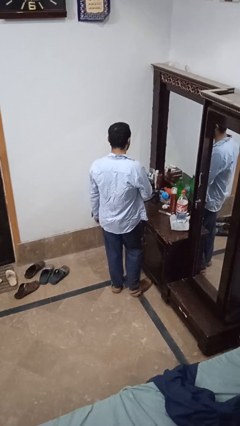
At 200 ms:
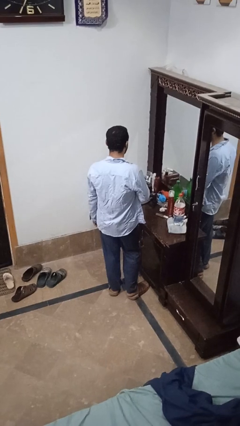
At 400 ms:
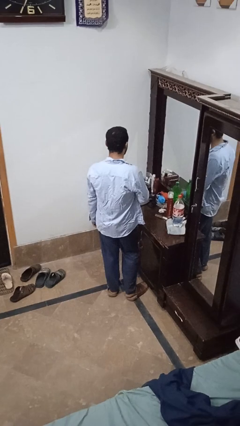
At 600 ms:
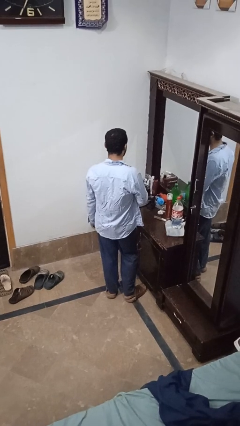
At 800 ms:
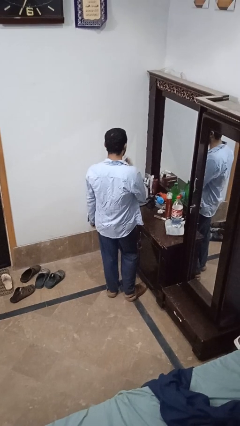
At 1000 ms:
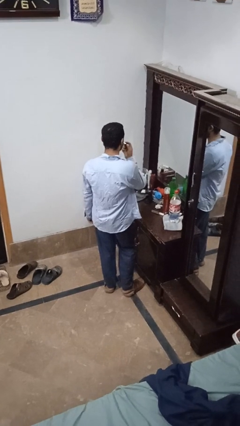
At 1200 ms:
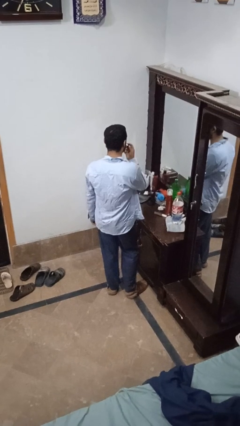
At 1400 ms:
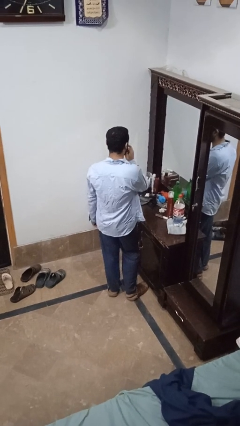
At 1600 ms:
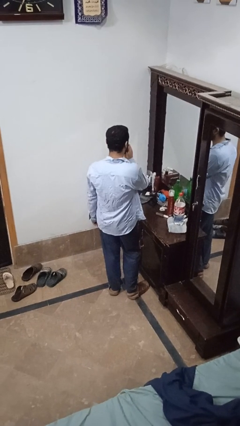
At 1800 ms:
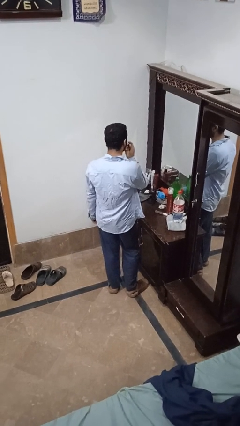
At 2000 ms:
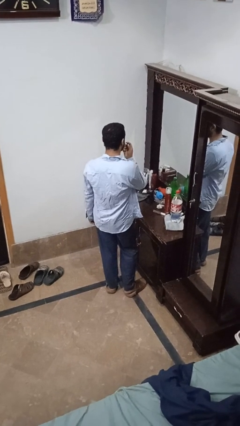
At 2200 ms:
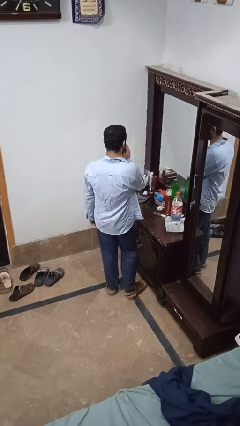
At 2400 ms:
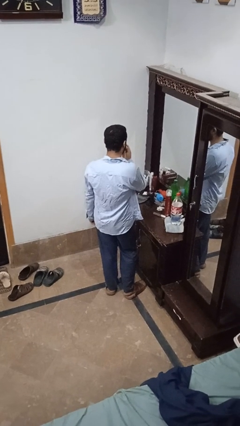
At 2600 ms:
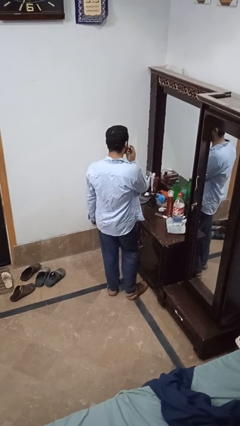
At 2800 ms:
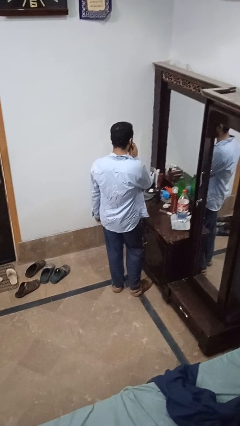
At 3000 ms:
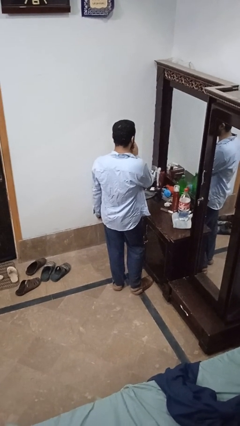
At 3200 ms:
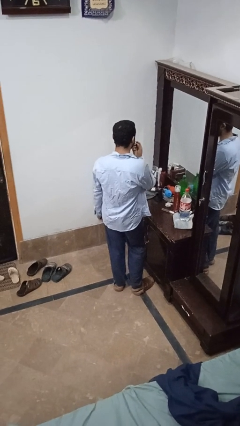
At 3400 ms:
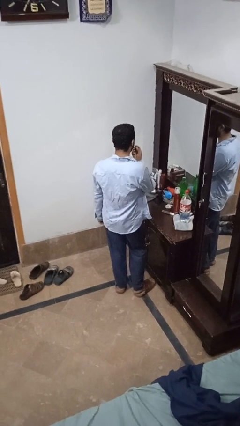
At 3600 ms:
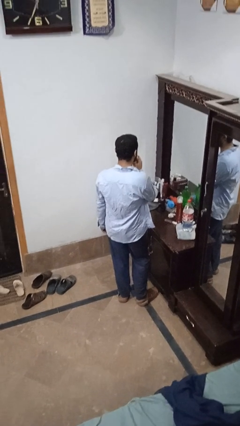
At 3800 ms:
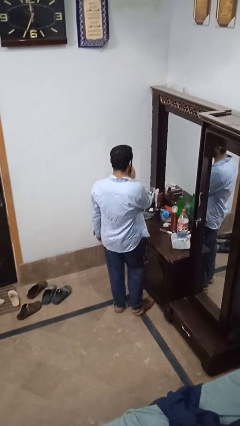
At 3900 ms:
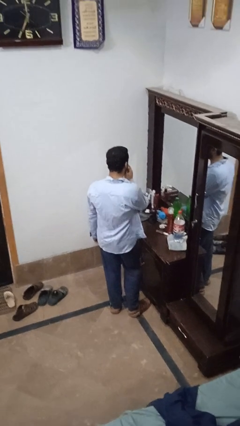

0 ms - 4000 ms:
person applies lip makeup

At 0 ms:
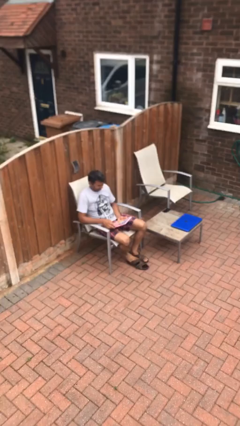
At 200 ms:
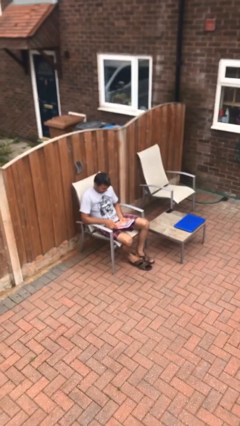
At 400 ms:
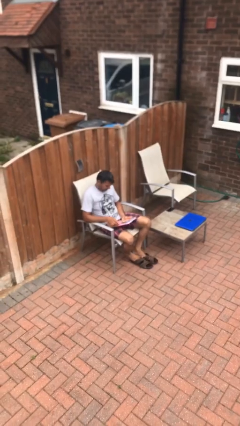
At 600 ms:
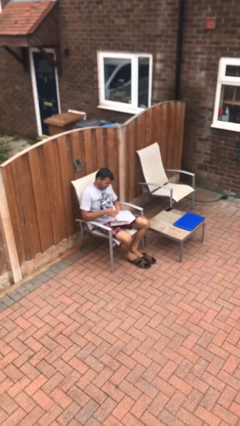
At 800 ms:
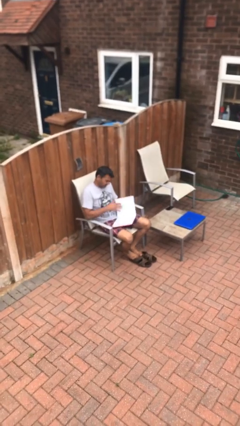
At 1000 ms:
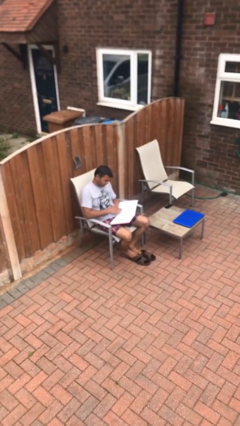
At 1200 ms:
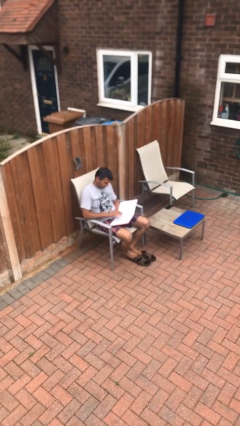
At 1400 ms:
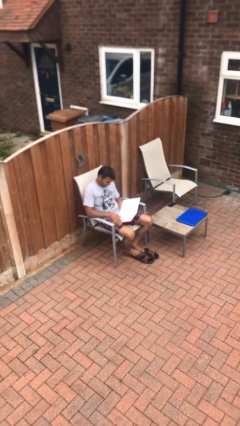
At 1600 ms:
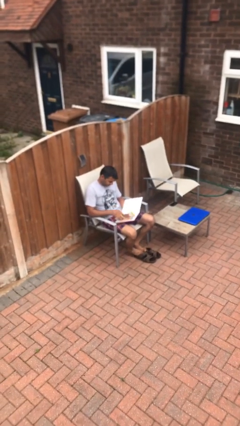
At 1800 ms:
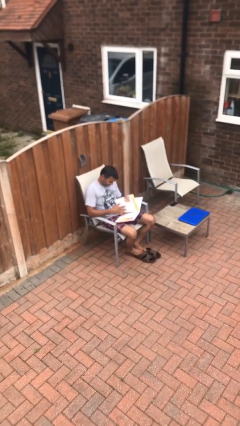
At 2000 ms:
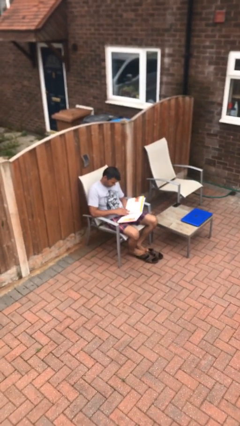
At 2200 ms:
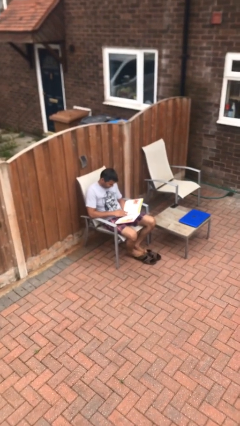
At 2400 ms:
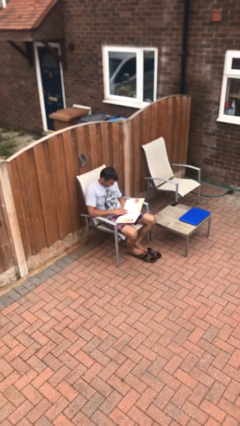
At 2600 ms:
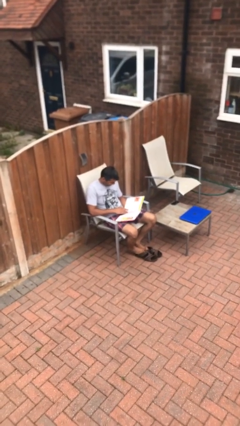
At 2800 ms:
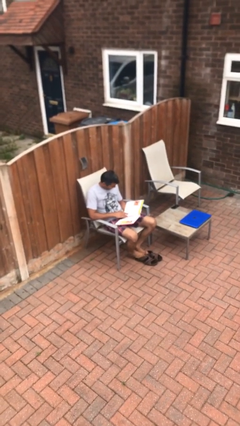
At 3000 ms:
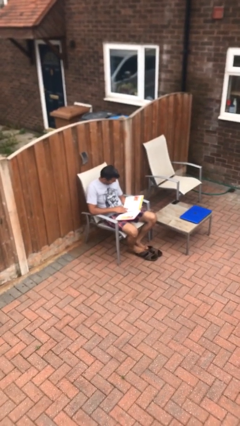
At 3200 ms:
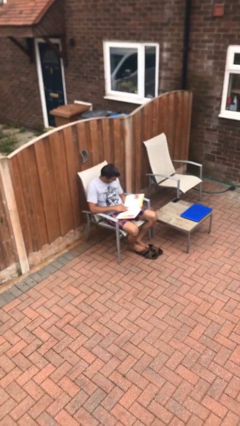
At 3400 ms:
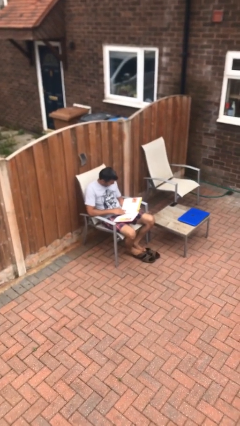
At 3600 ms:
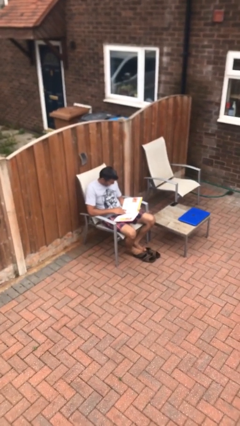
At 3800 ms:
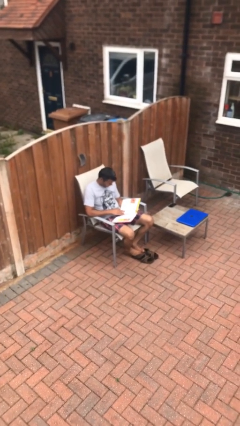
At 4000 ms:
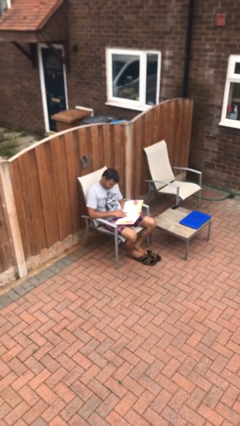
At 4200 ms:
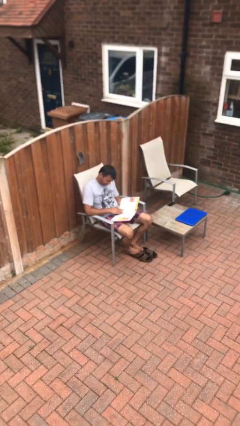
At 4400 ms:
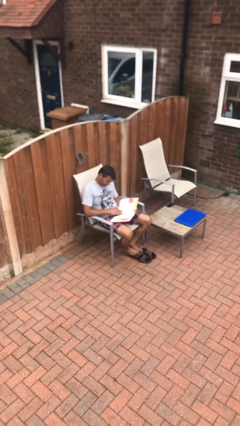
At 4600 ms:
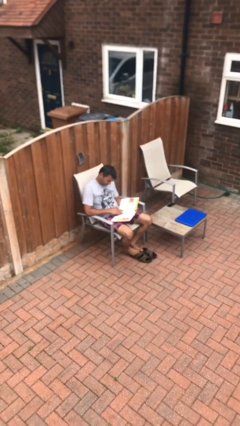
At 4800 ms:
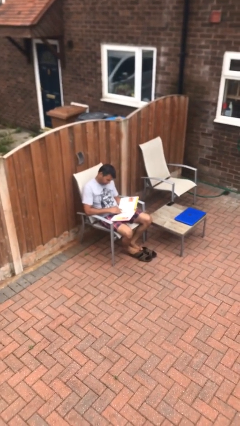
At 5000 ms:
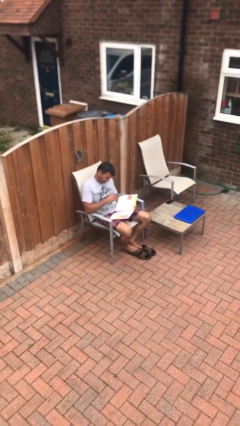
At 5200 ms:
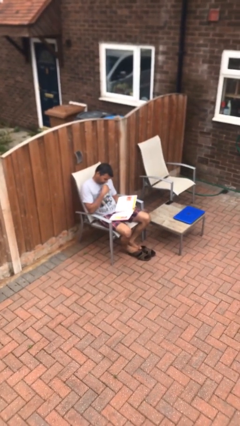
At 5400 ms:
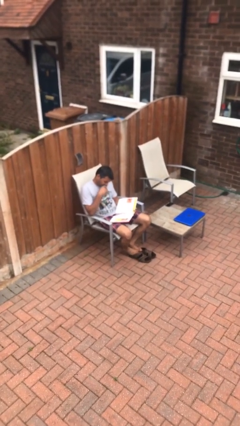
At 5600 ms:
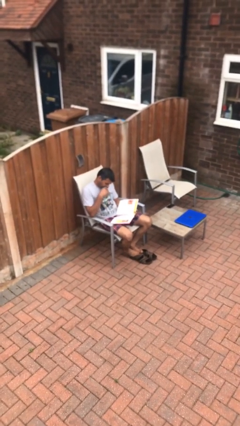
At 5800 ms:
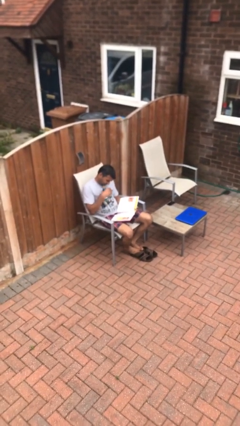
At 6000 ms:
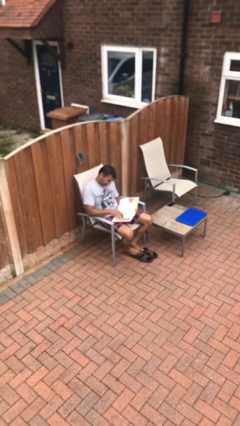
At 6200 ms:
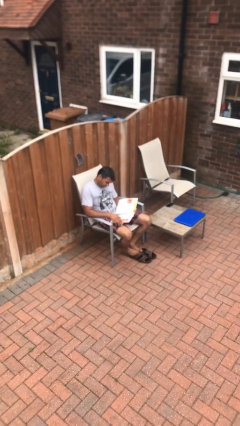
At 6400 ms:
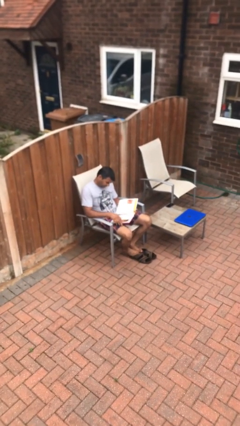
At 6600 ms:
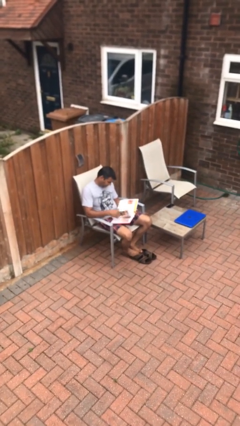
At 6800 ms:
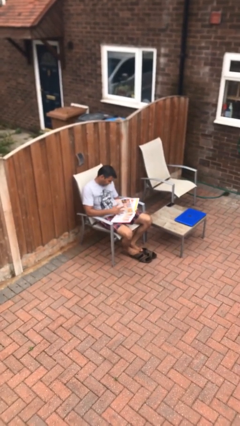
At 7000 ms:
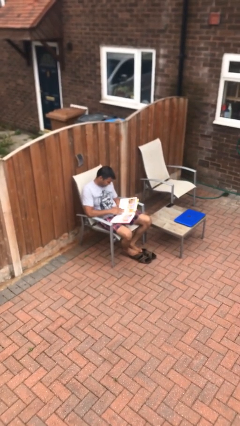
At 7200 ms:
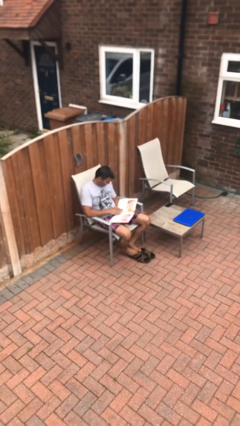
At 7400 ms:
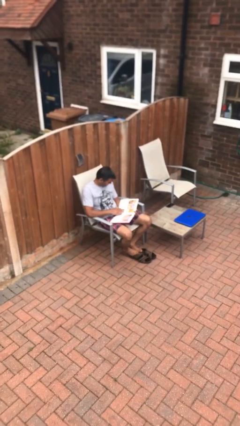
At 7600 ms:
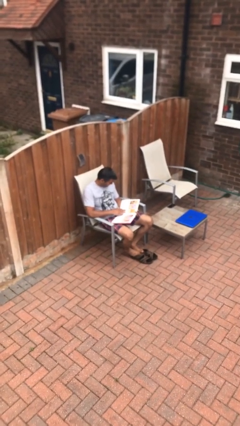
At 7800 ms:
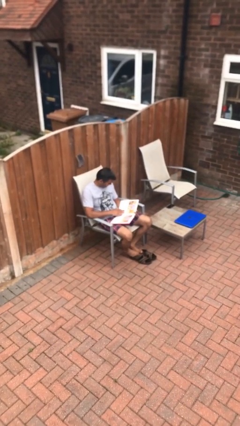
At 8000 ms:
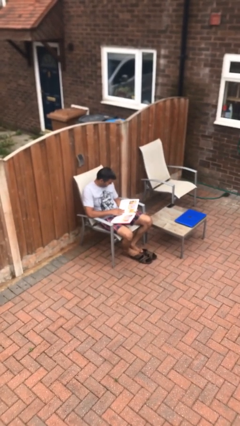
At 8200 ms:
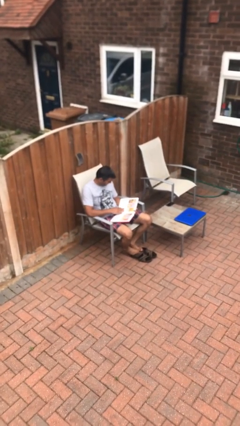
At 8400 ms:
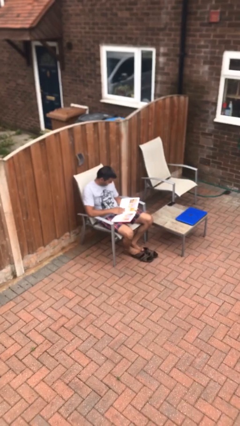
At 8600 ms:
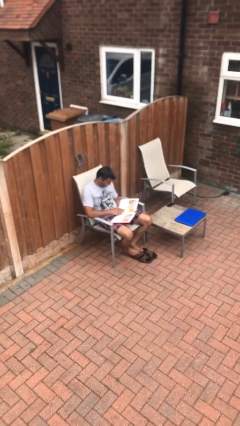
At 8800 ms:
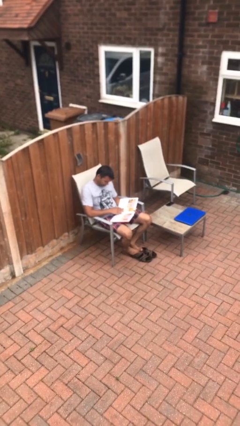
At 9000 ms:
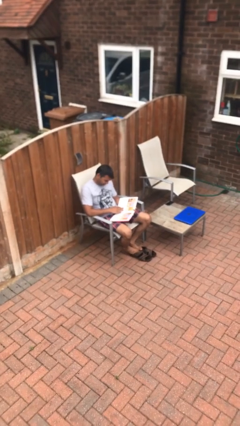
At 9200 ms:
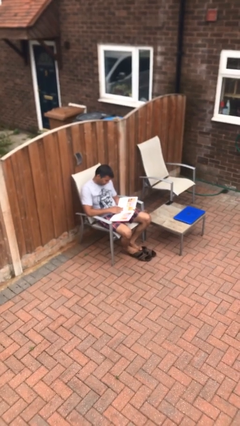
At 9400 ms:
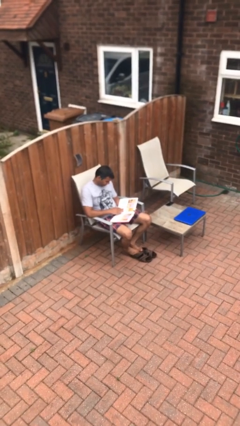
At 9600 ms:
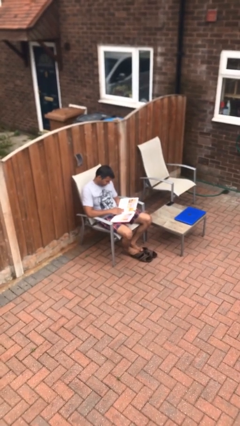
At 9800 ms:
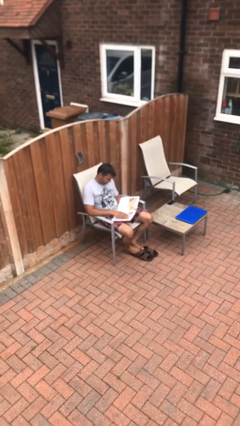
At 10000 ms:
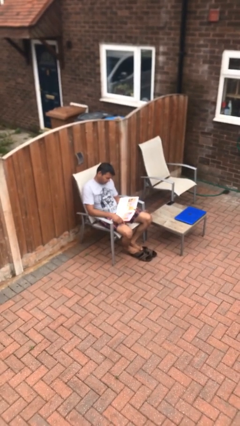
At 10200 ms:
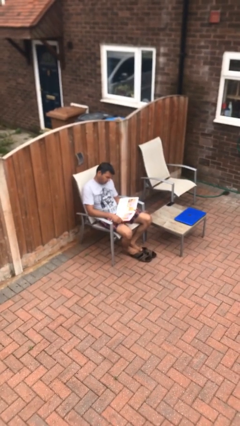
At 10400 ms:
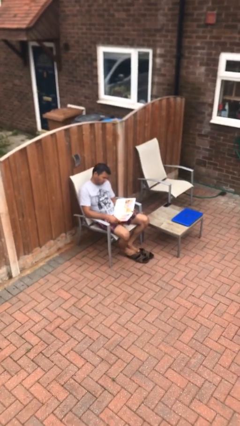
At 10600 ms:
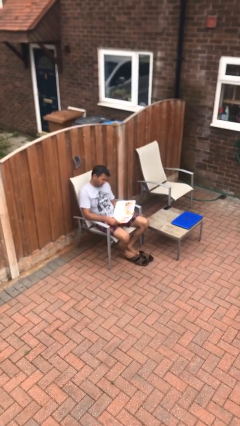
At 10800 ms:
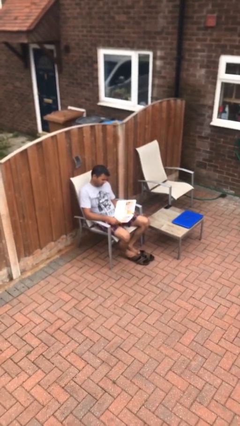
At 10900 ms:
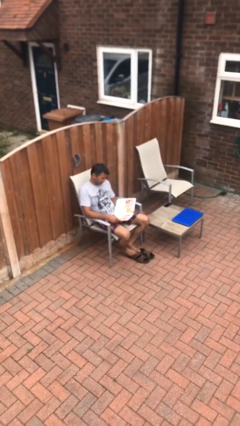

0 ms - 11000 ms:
person reads document

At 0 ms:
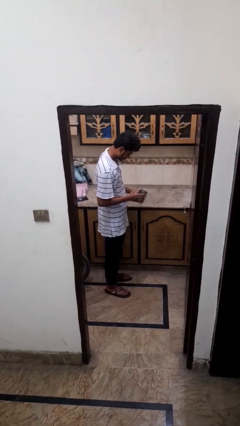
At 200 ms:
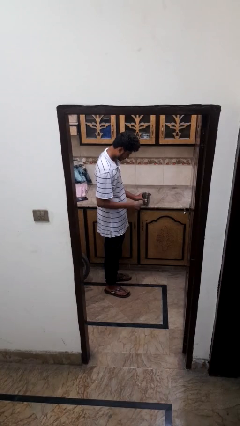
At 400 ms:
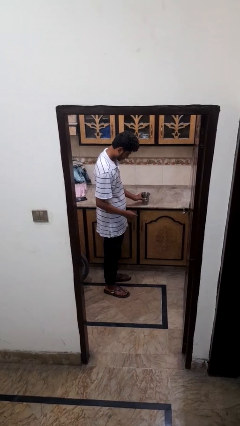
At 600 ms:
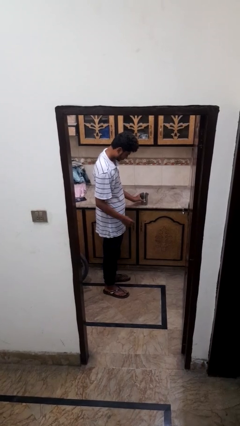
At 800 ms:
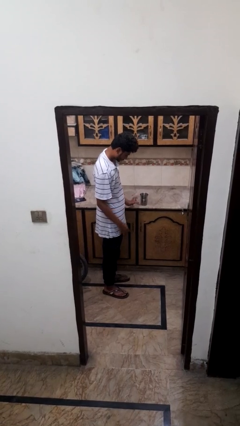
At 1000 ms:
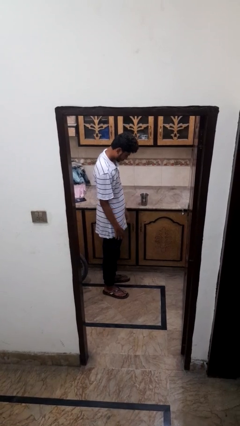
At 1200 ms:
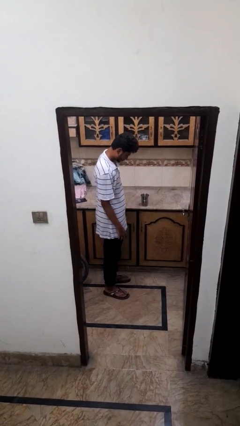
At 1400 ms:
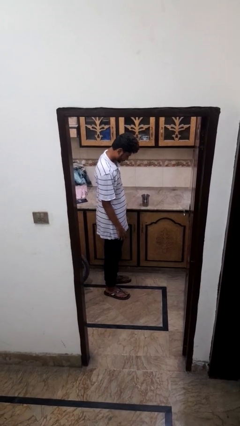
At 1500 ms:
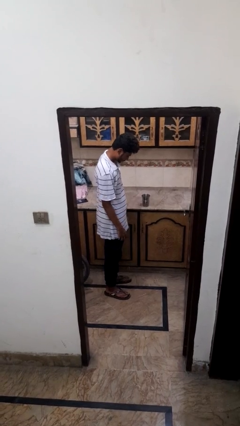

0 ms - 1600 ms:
person puts down object on countertop

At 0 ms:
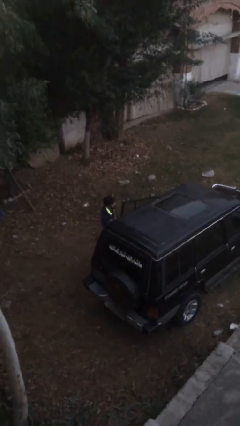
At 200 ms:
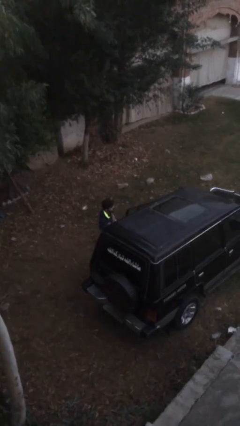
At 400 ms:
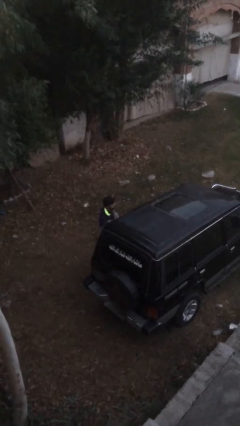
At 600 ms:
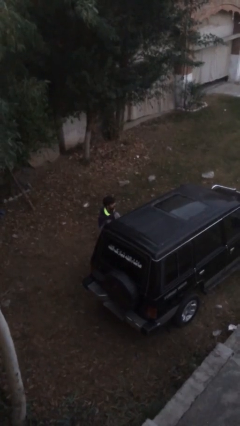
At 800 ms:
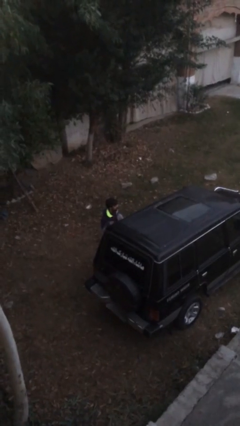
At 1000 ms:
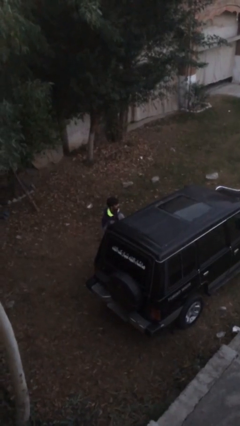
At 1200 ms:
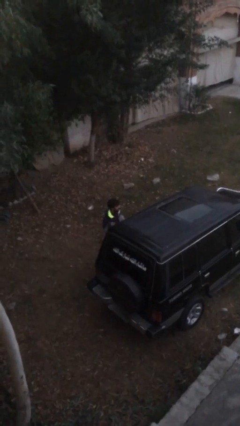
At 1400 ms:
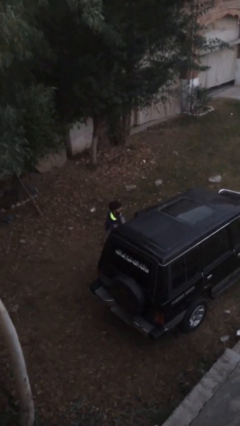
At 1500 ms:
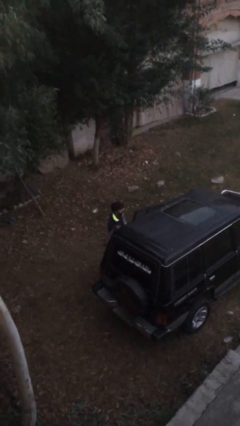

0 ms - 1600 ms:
person closes car door
